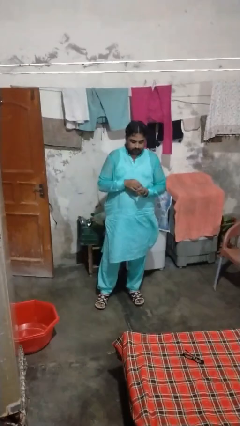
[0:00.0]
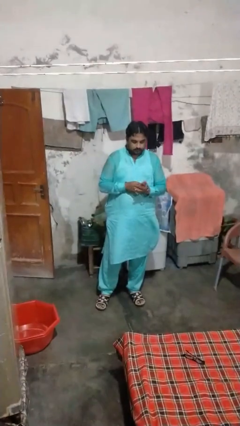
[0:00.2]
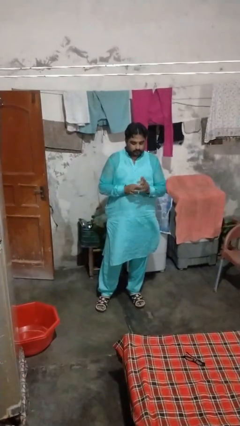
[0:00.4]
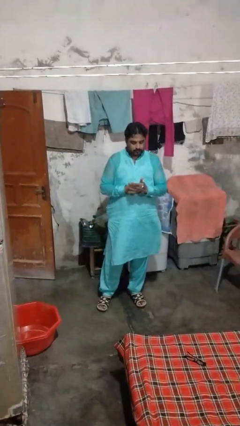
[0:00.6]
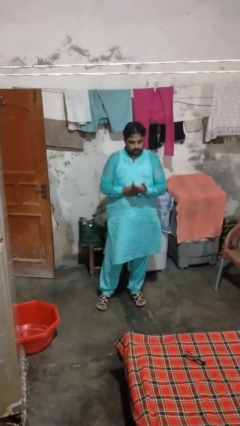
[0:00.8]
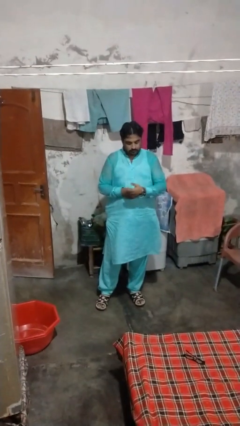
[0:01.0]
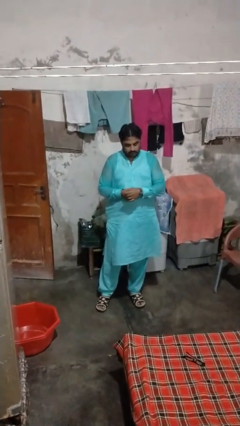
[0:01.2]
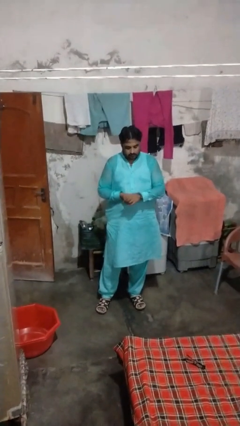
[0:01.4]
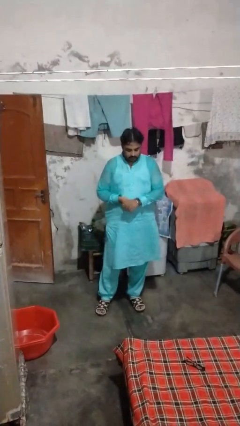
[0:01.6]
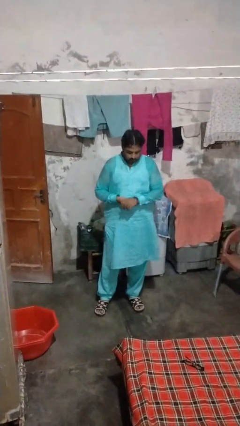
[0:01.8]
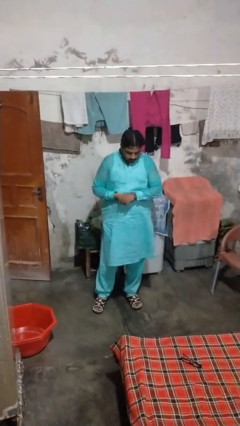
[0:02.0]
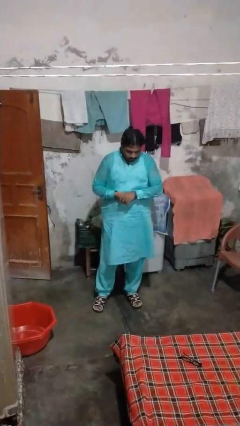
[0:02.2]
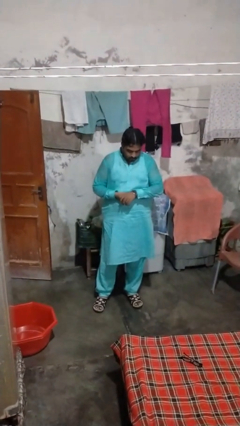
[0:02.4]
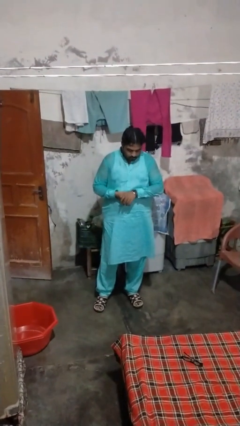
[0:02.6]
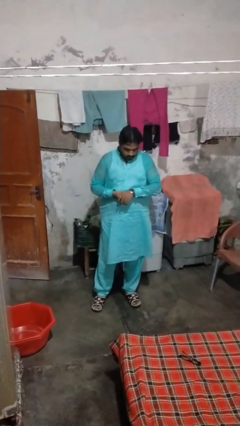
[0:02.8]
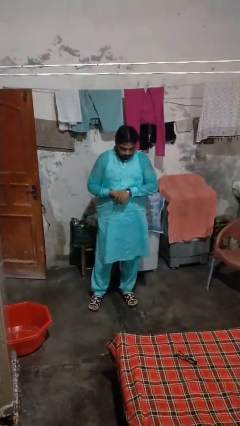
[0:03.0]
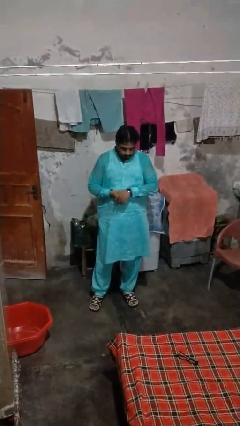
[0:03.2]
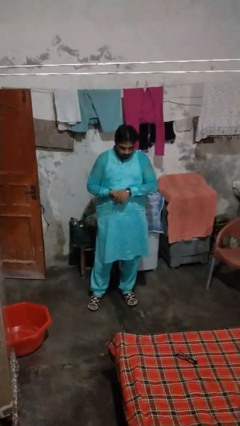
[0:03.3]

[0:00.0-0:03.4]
person puts on wristwatch

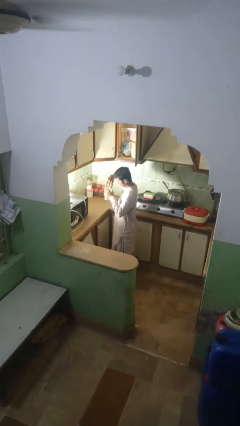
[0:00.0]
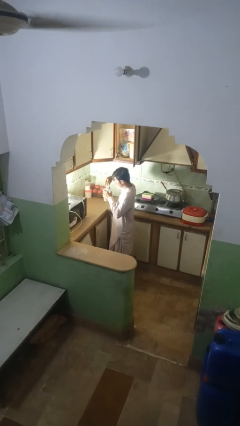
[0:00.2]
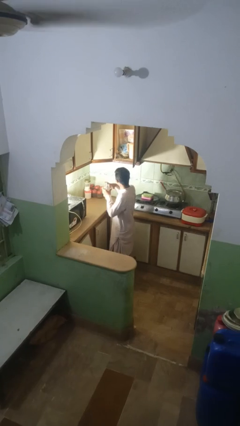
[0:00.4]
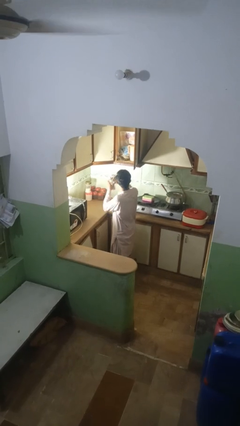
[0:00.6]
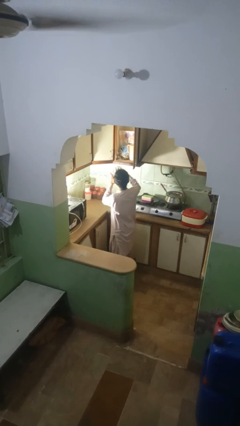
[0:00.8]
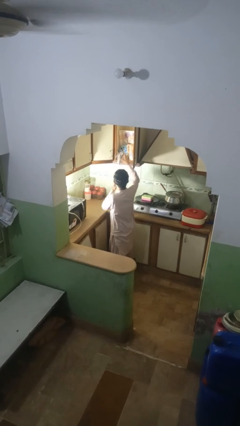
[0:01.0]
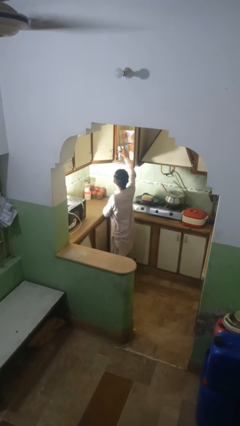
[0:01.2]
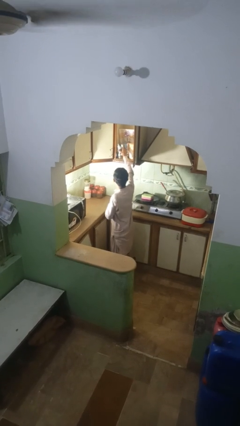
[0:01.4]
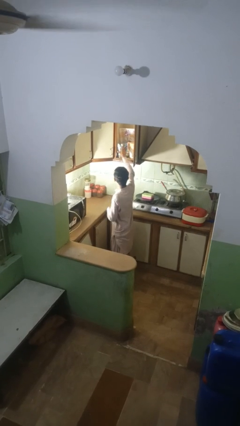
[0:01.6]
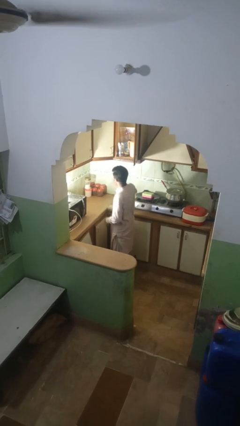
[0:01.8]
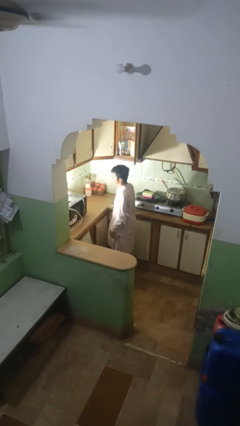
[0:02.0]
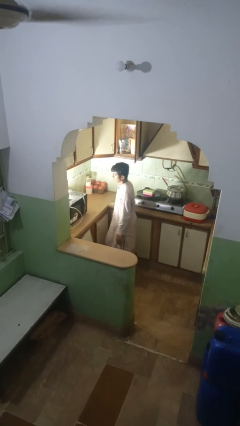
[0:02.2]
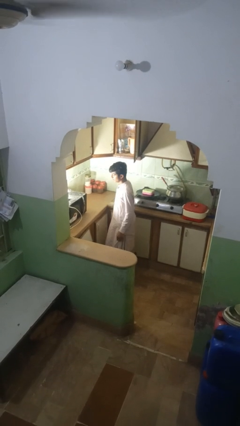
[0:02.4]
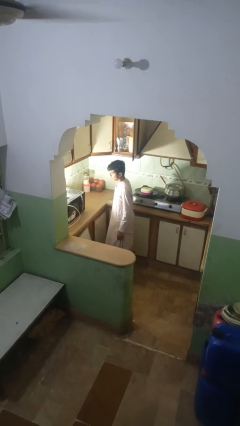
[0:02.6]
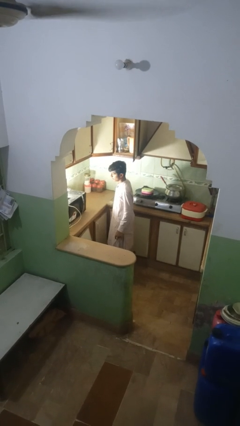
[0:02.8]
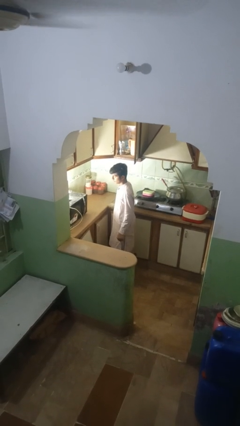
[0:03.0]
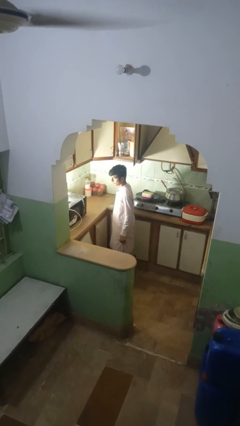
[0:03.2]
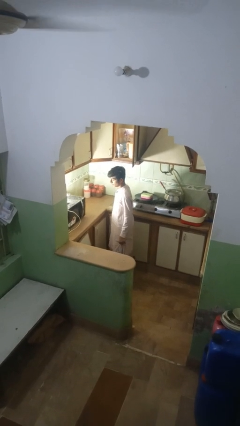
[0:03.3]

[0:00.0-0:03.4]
person puts object into kitchen drawer

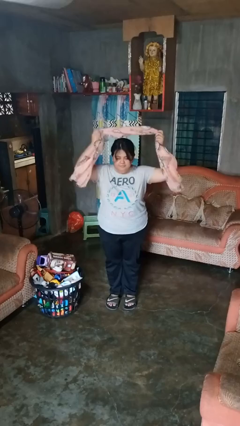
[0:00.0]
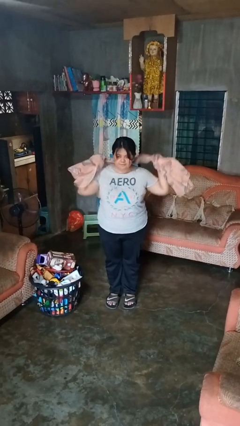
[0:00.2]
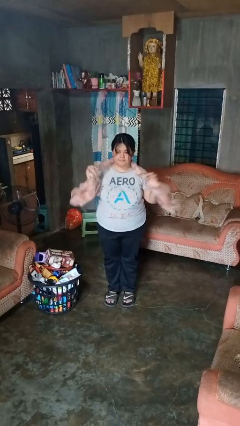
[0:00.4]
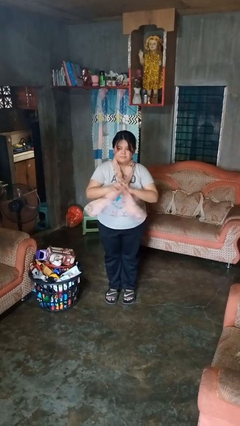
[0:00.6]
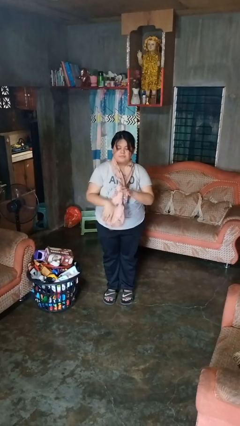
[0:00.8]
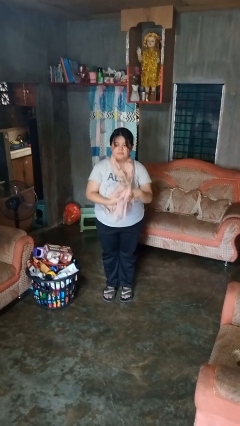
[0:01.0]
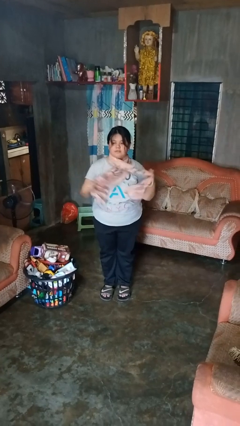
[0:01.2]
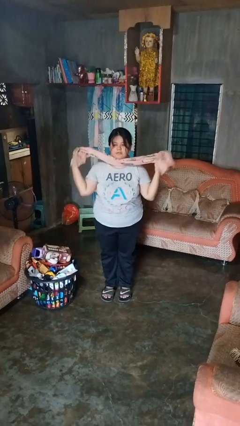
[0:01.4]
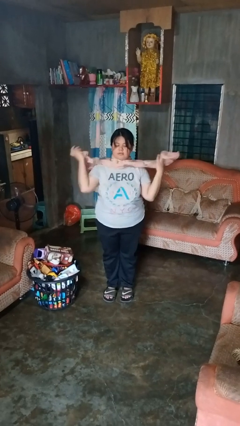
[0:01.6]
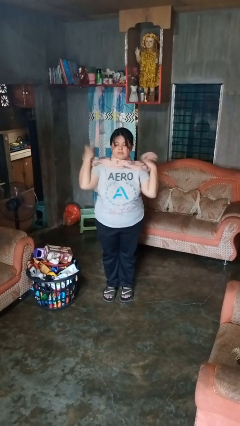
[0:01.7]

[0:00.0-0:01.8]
person puts on scarf

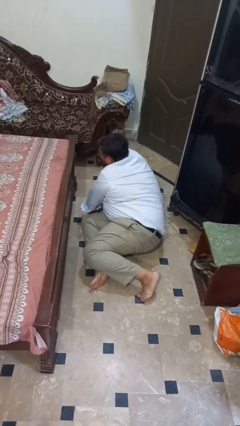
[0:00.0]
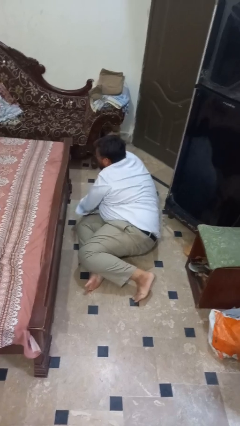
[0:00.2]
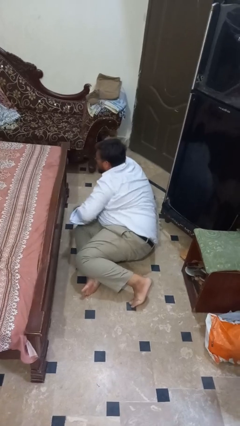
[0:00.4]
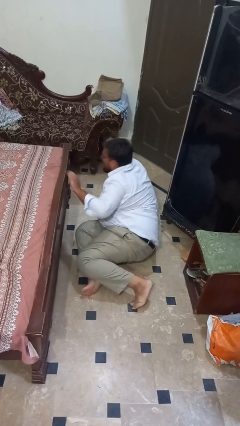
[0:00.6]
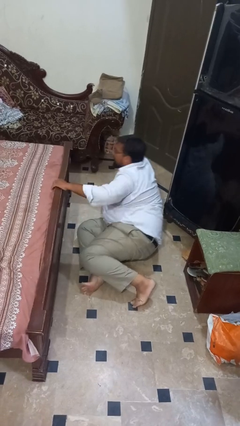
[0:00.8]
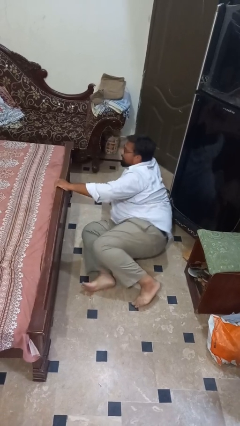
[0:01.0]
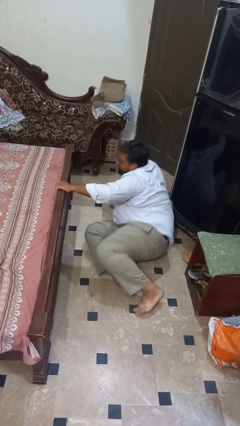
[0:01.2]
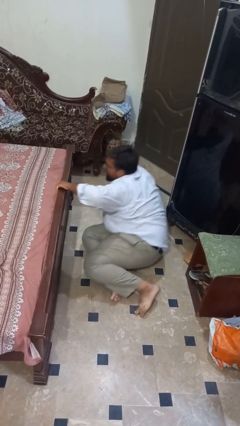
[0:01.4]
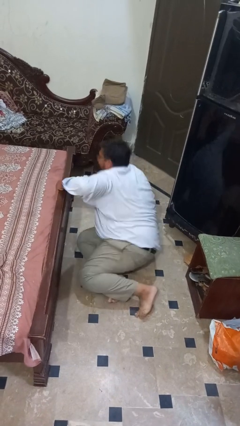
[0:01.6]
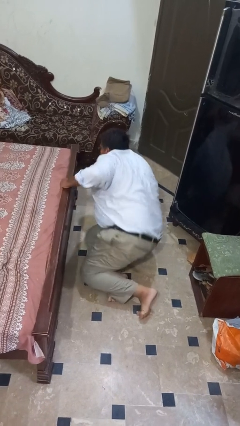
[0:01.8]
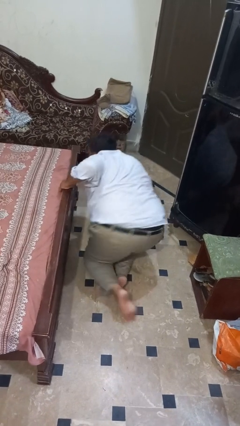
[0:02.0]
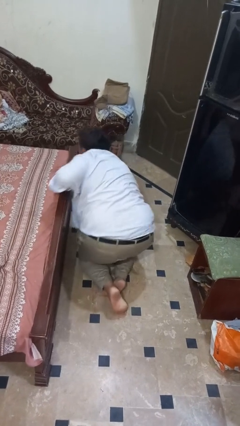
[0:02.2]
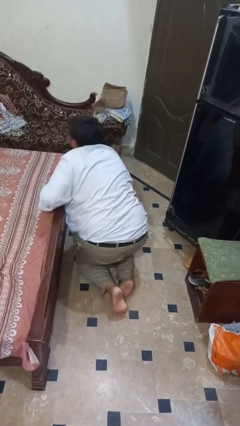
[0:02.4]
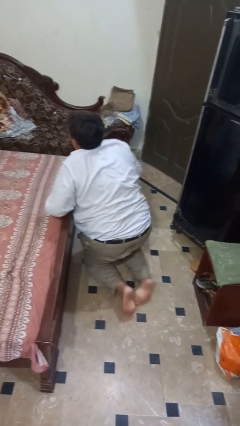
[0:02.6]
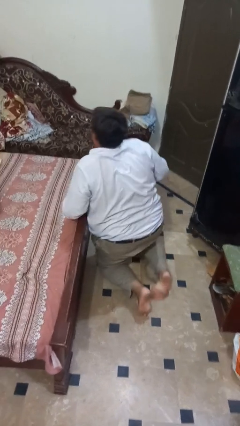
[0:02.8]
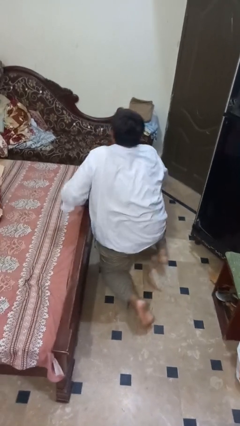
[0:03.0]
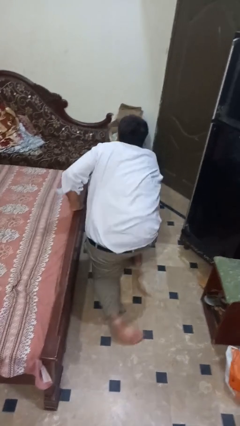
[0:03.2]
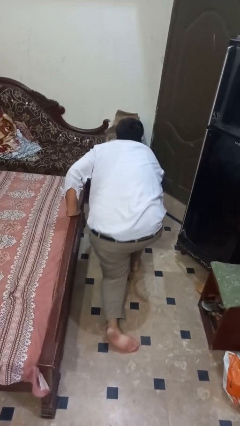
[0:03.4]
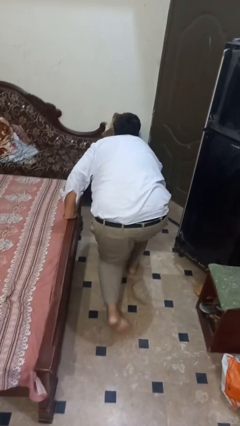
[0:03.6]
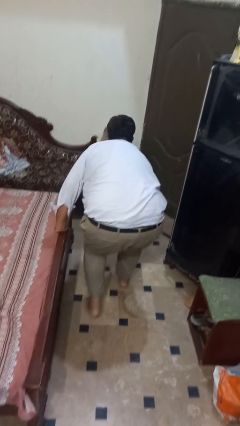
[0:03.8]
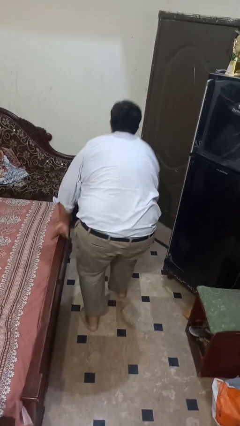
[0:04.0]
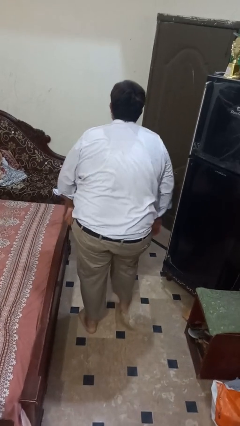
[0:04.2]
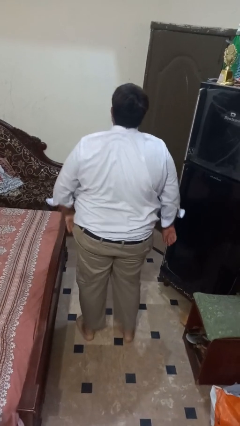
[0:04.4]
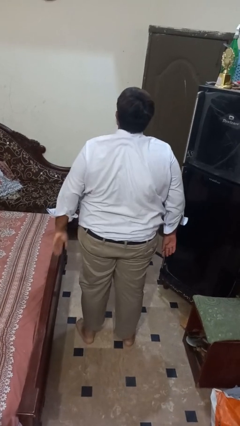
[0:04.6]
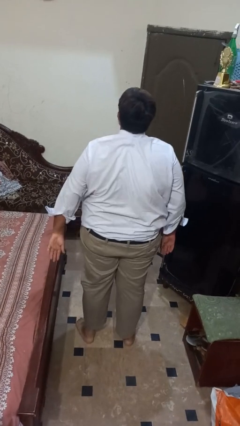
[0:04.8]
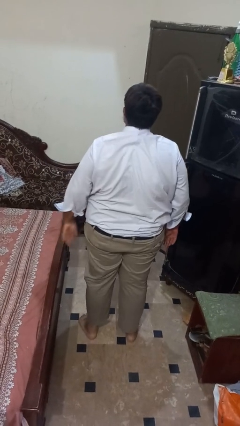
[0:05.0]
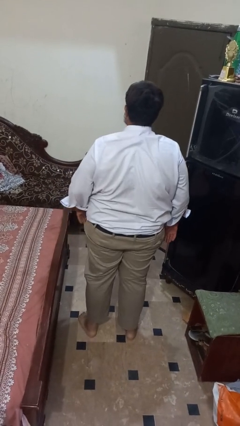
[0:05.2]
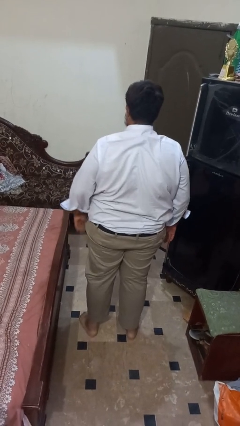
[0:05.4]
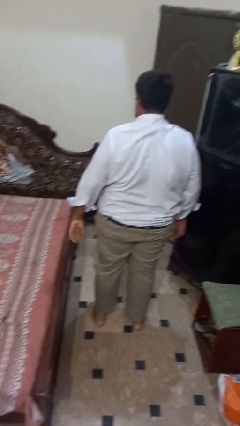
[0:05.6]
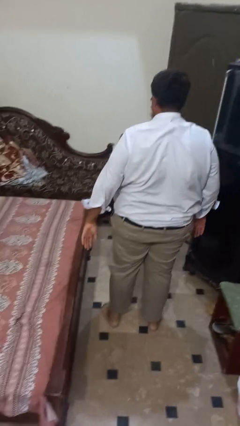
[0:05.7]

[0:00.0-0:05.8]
person stands up from floor

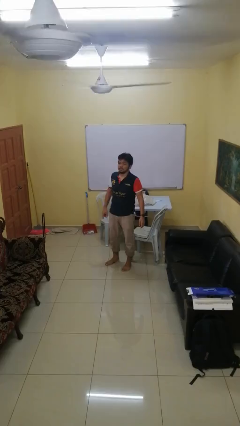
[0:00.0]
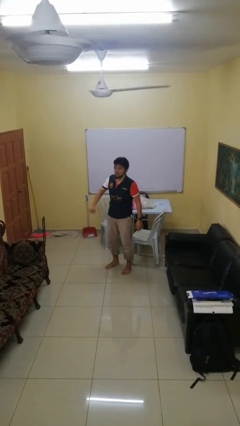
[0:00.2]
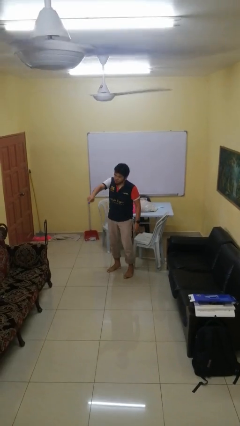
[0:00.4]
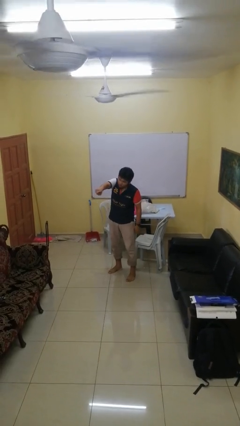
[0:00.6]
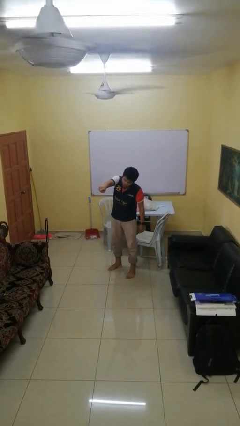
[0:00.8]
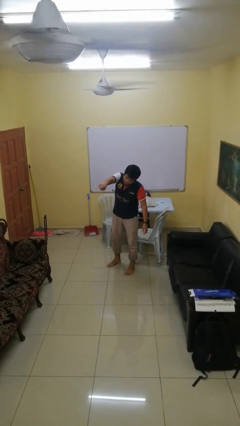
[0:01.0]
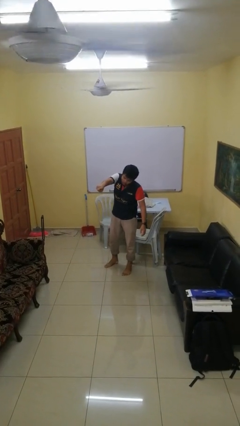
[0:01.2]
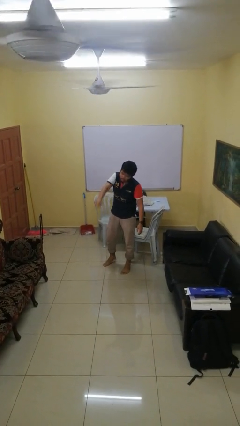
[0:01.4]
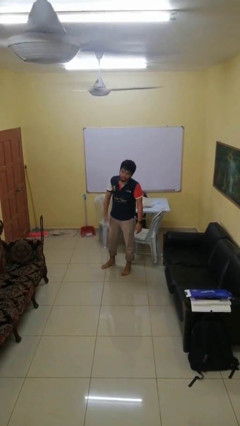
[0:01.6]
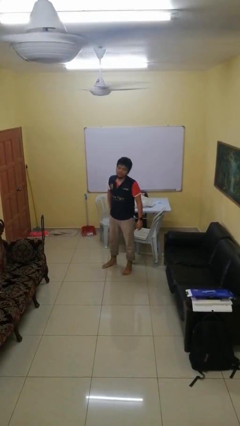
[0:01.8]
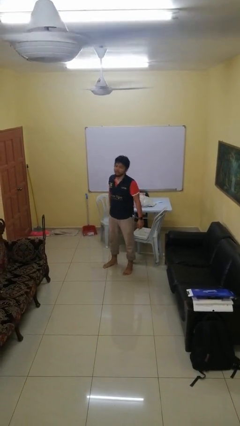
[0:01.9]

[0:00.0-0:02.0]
person points at person

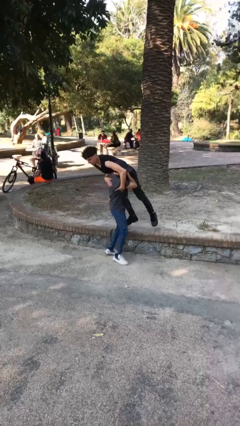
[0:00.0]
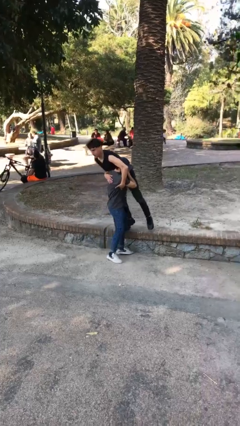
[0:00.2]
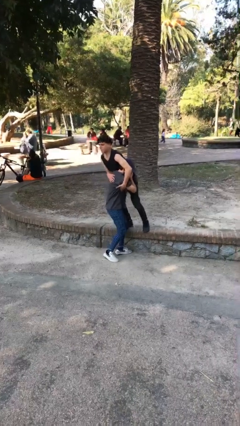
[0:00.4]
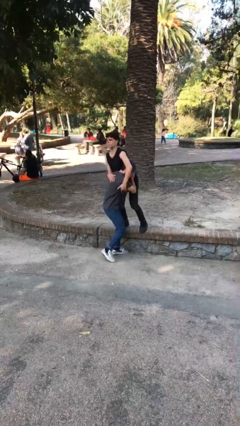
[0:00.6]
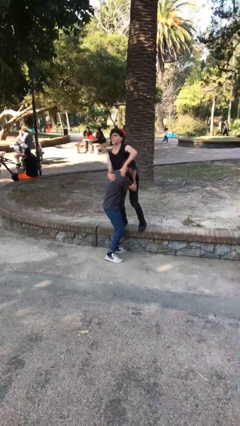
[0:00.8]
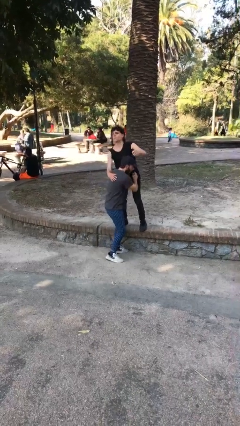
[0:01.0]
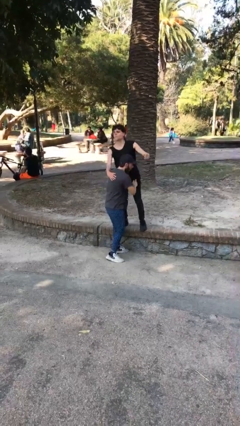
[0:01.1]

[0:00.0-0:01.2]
person puts down person
